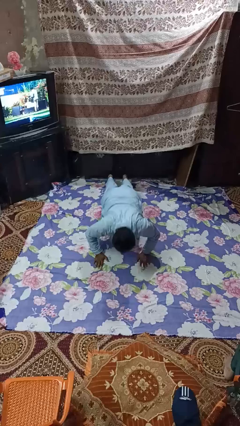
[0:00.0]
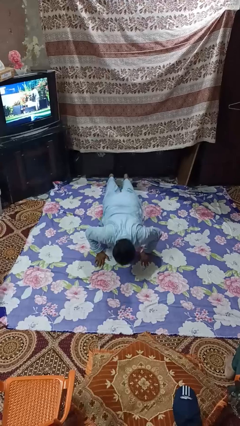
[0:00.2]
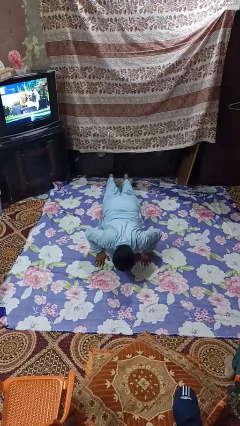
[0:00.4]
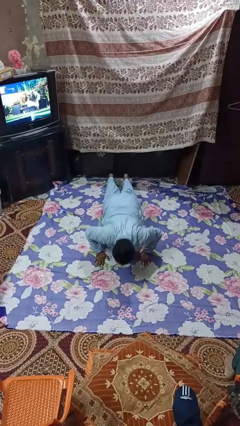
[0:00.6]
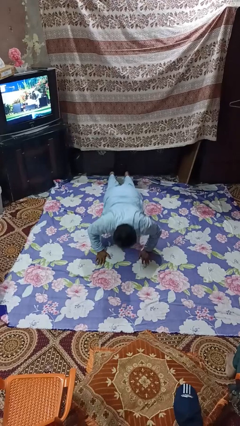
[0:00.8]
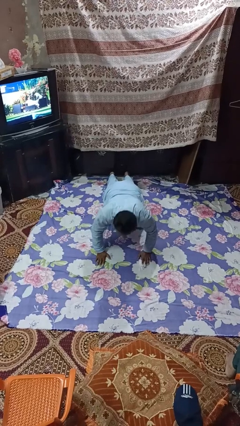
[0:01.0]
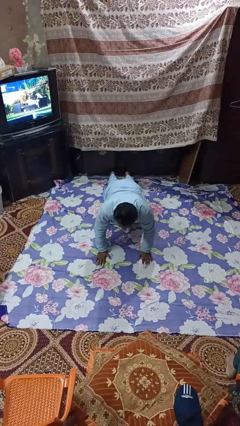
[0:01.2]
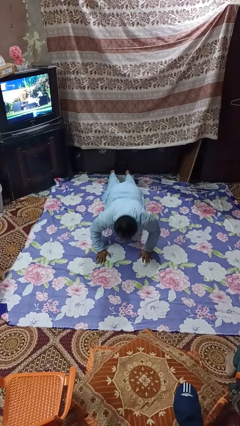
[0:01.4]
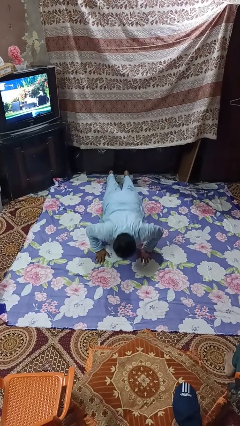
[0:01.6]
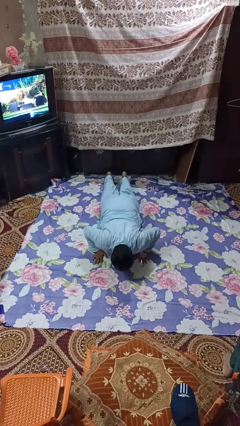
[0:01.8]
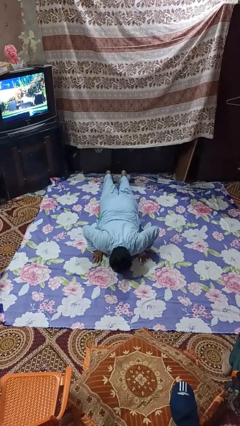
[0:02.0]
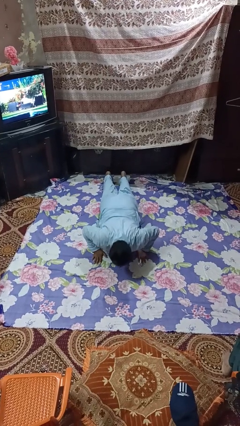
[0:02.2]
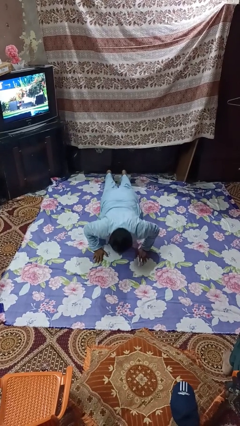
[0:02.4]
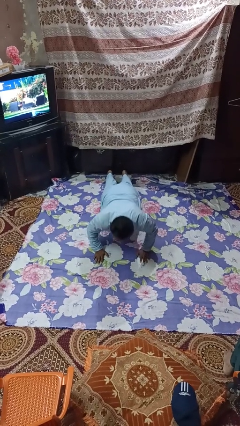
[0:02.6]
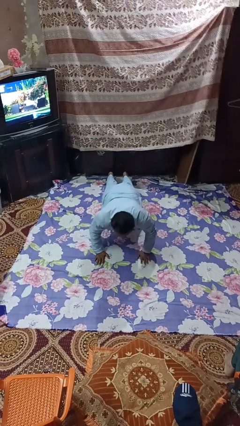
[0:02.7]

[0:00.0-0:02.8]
person exercises with pushup

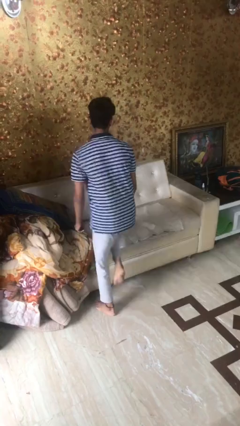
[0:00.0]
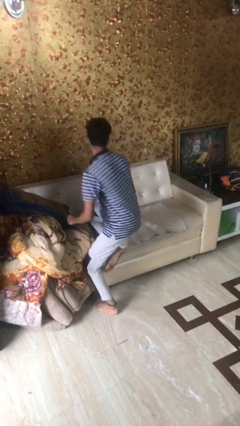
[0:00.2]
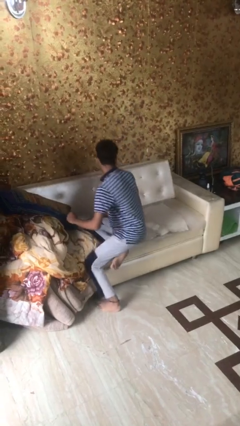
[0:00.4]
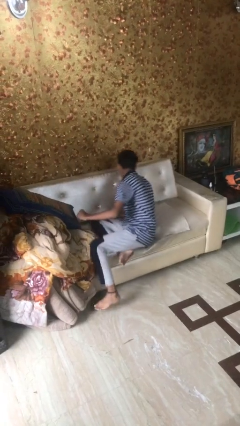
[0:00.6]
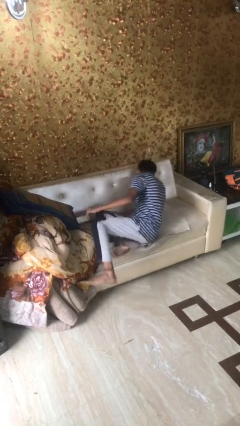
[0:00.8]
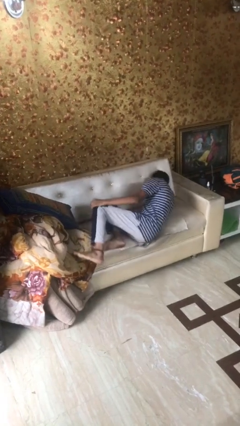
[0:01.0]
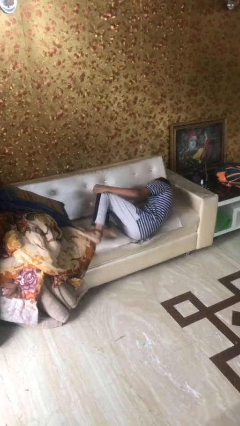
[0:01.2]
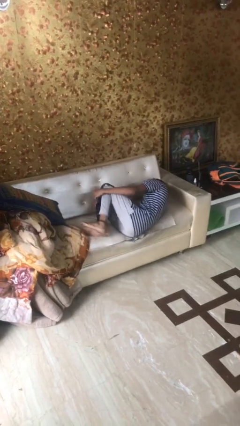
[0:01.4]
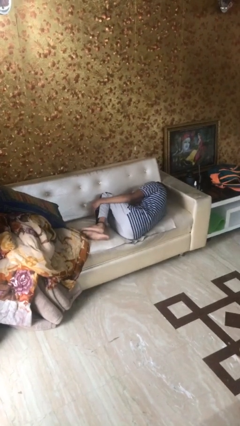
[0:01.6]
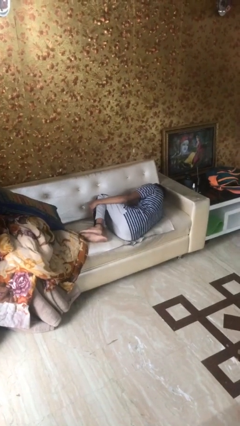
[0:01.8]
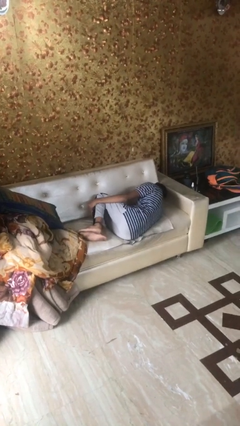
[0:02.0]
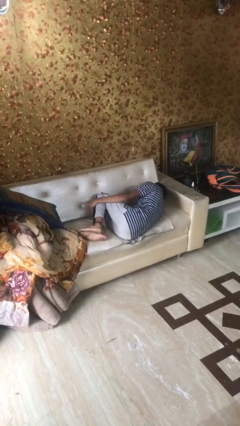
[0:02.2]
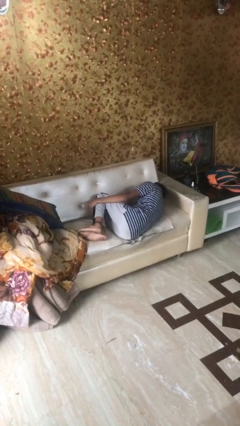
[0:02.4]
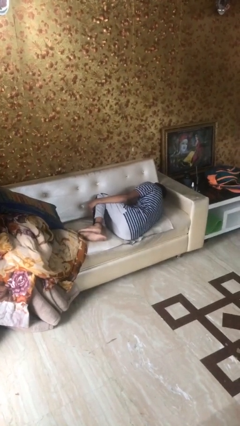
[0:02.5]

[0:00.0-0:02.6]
person lies down on couch

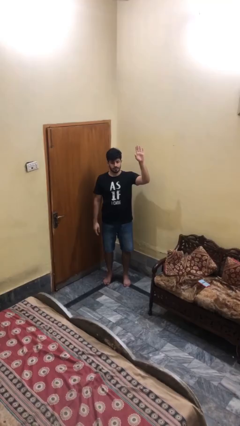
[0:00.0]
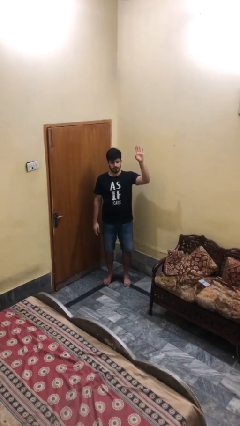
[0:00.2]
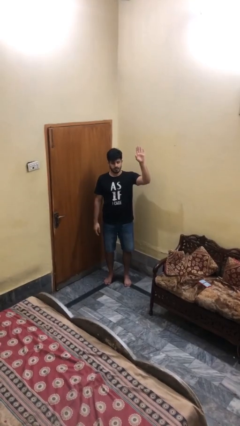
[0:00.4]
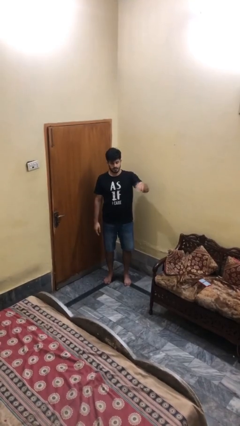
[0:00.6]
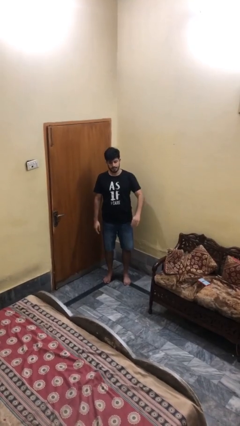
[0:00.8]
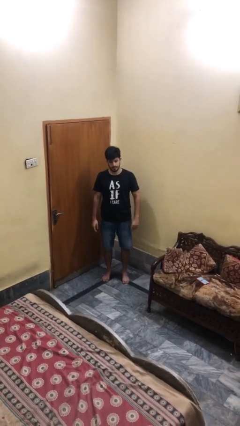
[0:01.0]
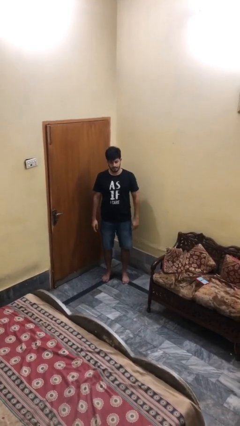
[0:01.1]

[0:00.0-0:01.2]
person gestures lower hand

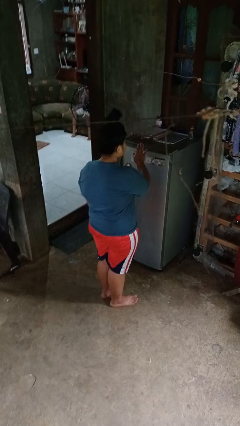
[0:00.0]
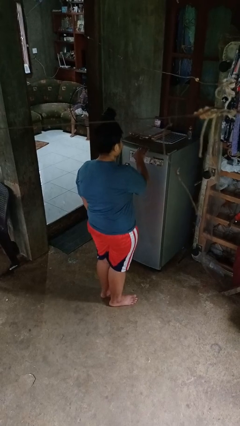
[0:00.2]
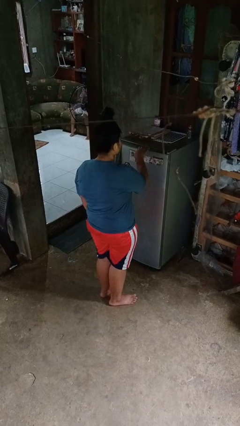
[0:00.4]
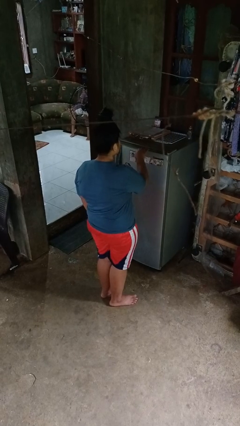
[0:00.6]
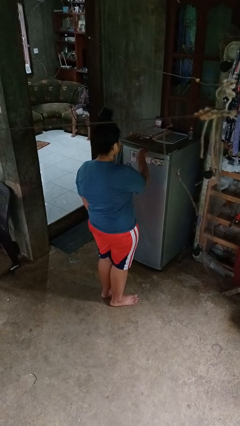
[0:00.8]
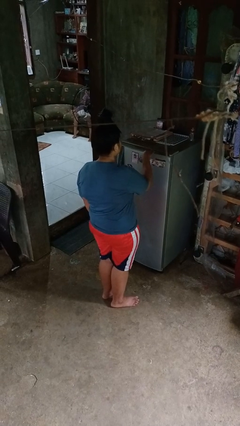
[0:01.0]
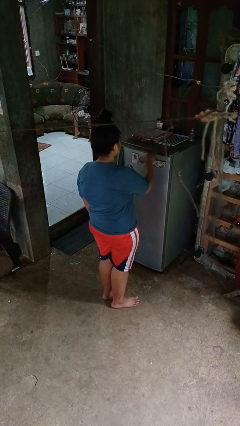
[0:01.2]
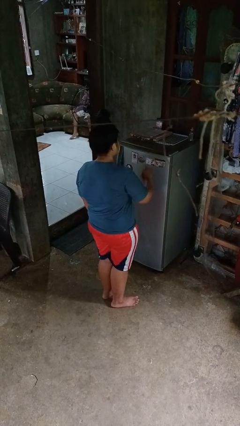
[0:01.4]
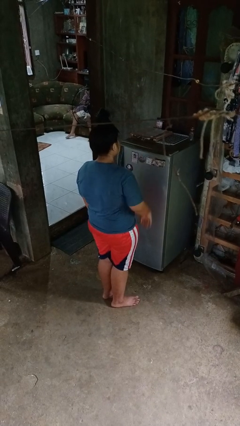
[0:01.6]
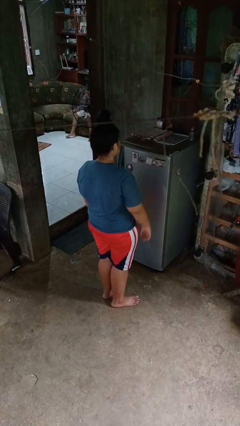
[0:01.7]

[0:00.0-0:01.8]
person taps object with finger

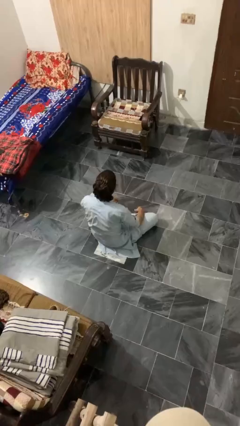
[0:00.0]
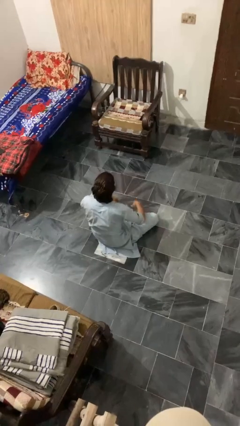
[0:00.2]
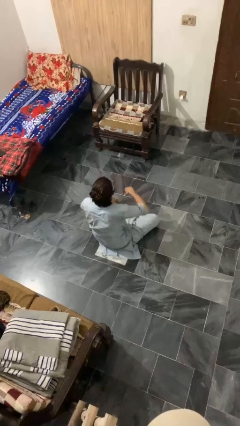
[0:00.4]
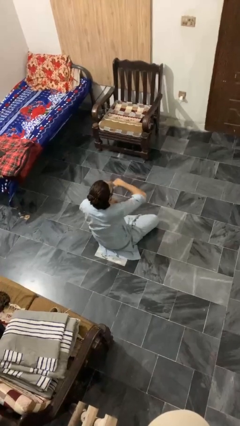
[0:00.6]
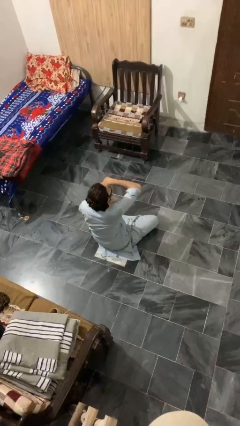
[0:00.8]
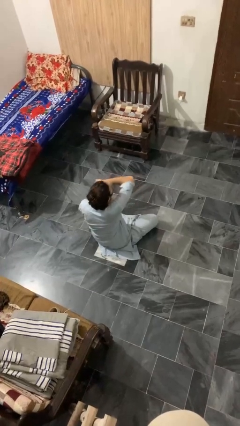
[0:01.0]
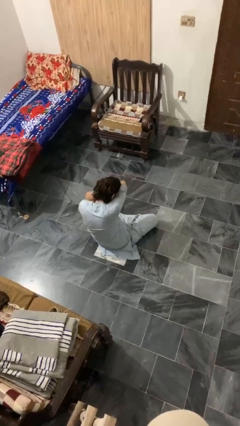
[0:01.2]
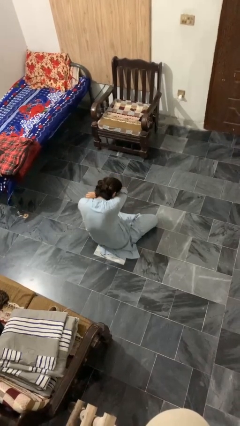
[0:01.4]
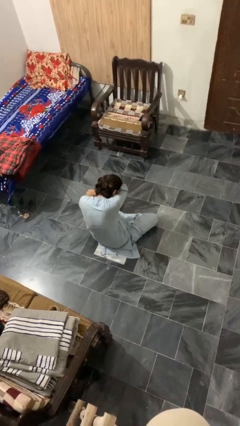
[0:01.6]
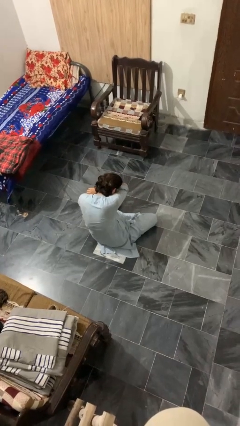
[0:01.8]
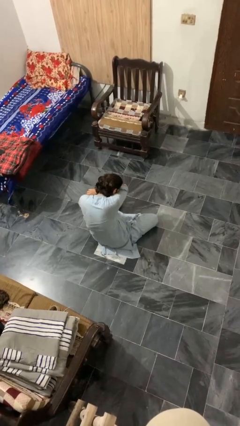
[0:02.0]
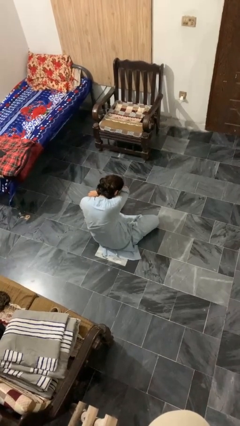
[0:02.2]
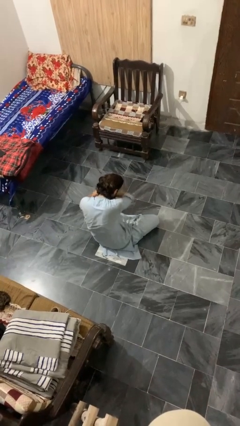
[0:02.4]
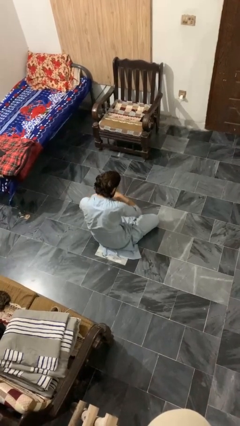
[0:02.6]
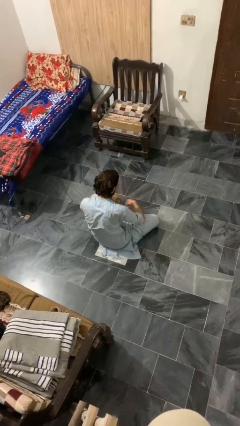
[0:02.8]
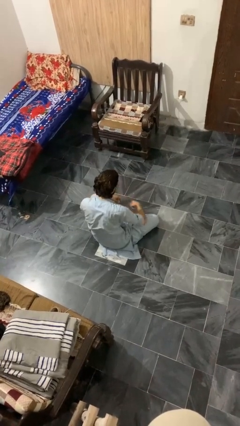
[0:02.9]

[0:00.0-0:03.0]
person sneezes into arm

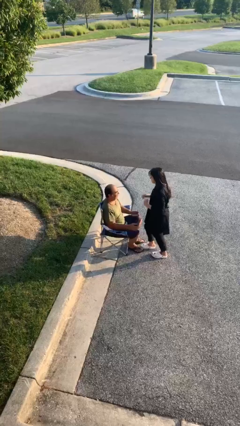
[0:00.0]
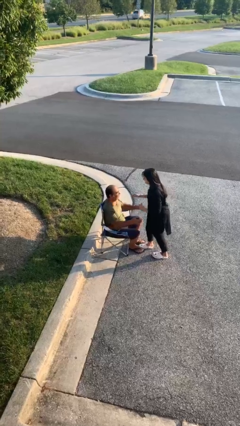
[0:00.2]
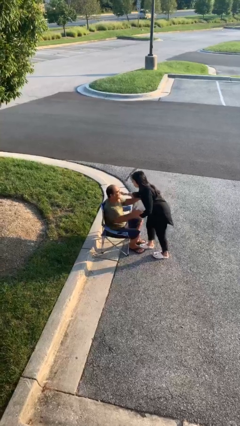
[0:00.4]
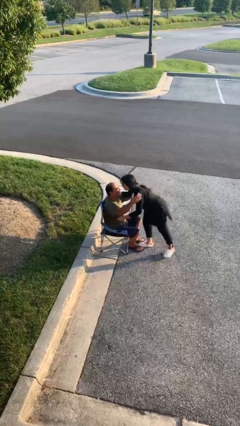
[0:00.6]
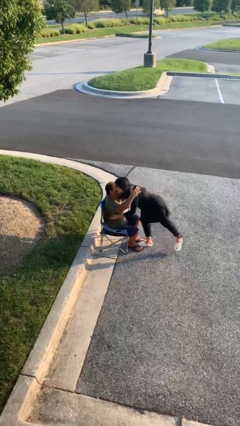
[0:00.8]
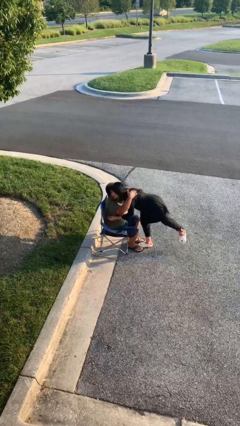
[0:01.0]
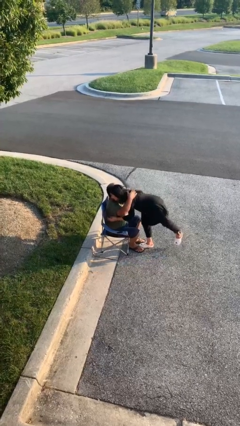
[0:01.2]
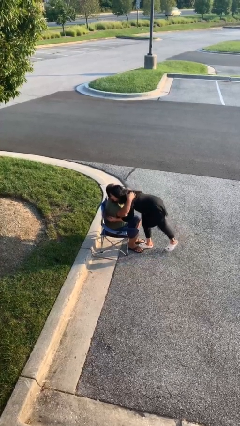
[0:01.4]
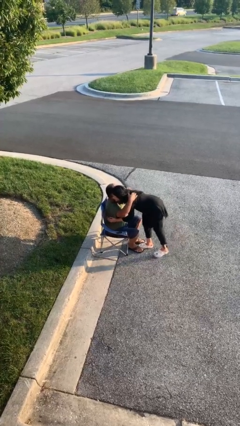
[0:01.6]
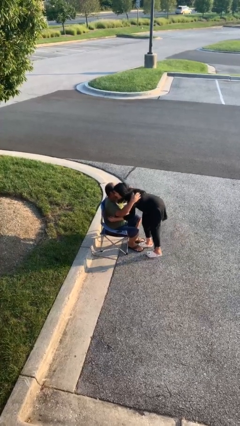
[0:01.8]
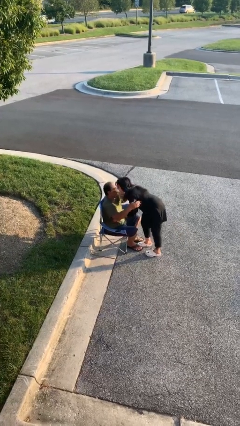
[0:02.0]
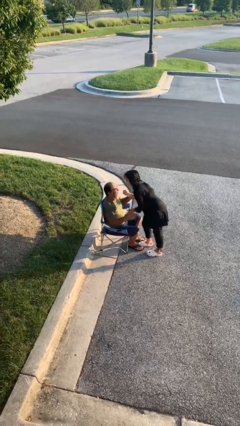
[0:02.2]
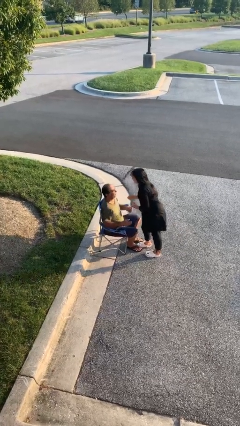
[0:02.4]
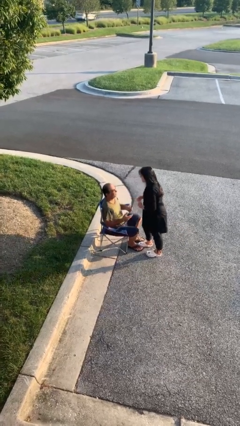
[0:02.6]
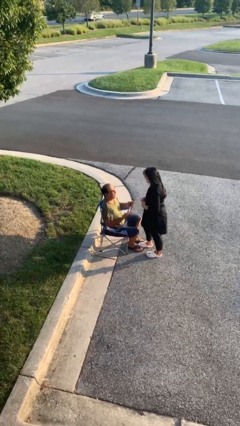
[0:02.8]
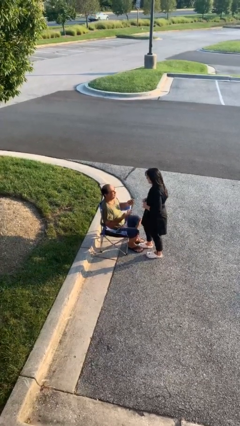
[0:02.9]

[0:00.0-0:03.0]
person embraces person

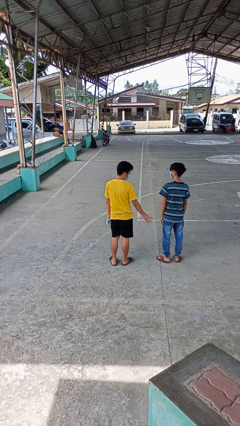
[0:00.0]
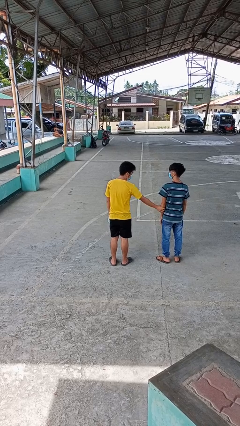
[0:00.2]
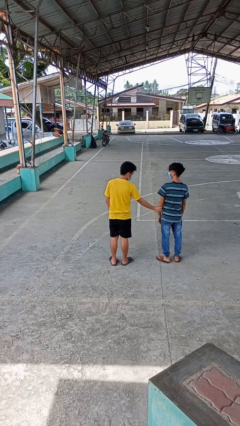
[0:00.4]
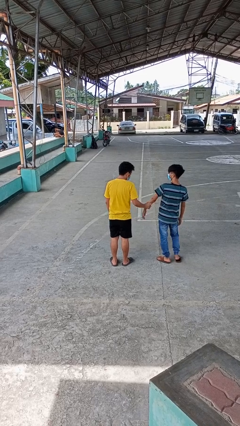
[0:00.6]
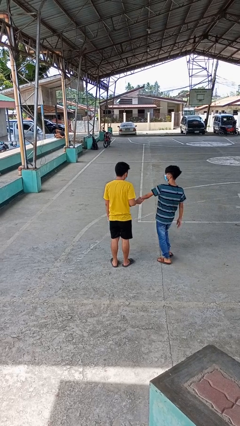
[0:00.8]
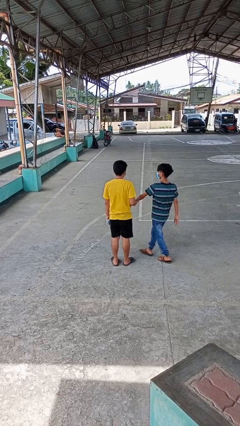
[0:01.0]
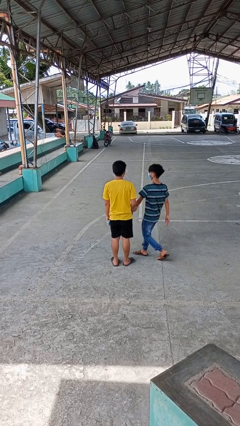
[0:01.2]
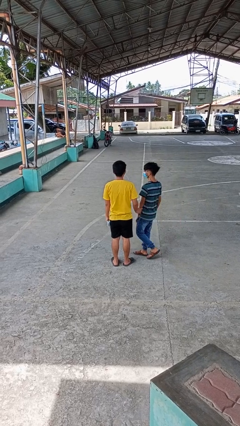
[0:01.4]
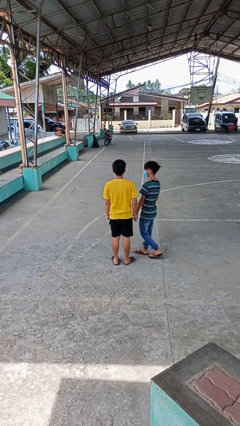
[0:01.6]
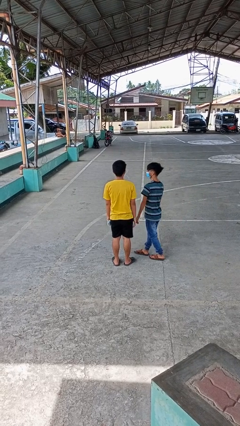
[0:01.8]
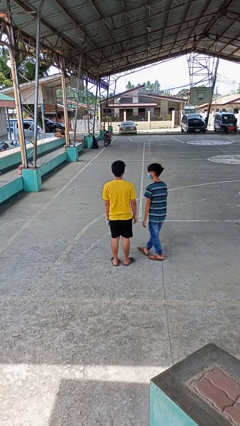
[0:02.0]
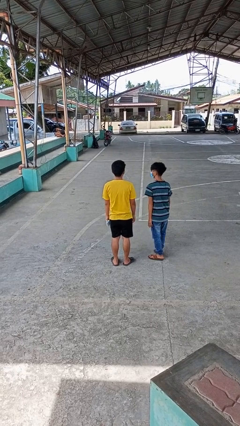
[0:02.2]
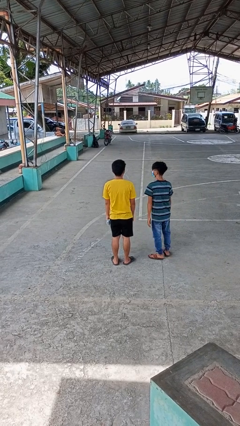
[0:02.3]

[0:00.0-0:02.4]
person grabs person by forearm

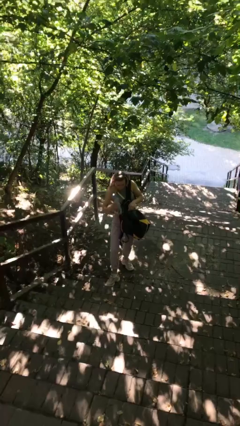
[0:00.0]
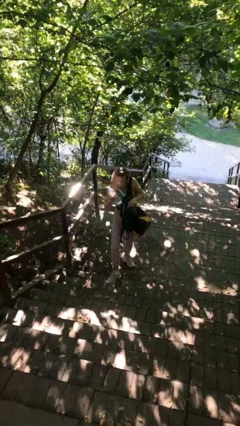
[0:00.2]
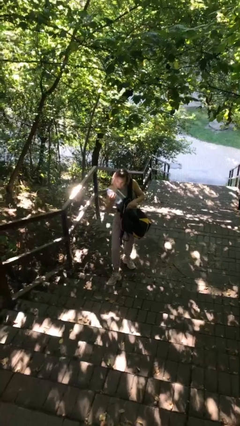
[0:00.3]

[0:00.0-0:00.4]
person takes object from backpack
